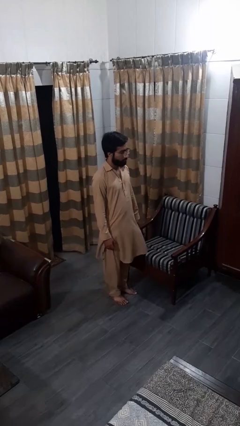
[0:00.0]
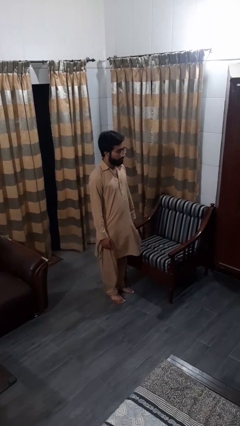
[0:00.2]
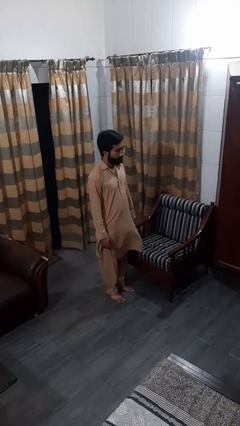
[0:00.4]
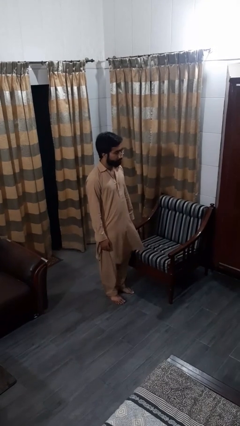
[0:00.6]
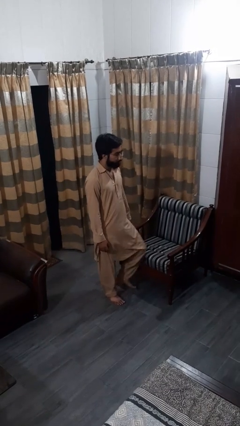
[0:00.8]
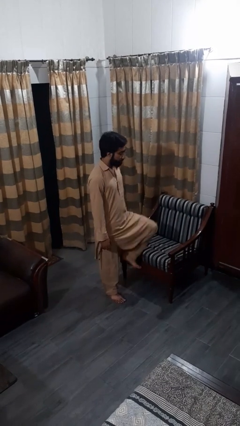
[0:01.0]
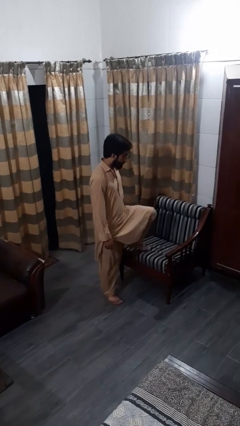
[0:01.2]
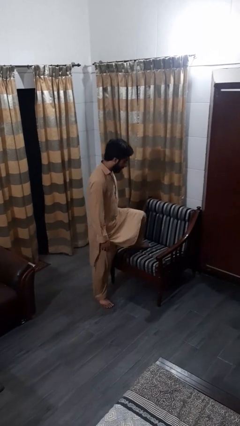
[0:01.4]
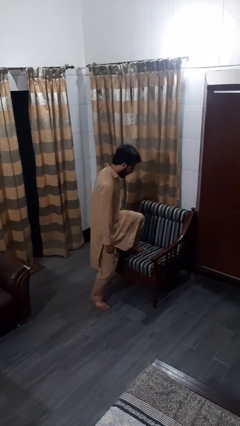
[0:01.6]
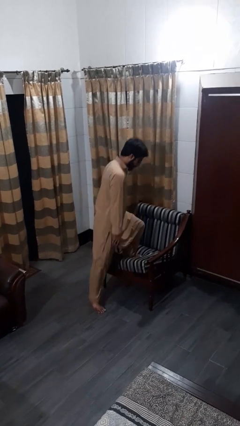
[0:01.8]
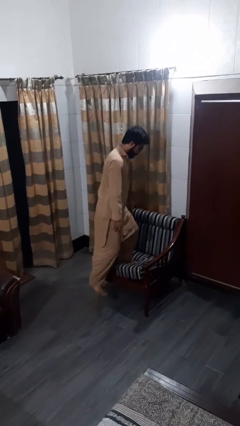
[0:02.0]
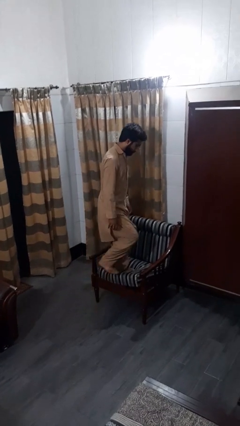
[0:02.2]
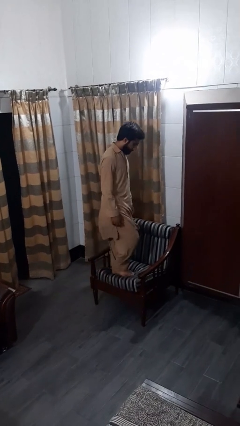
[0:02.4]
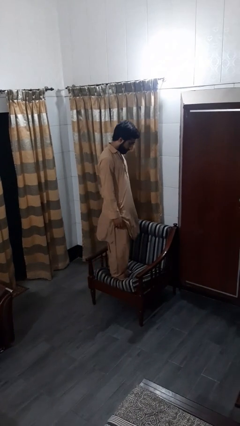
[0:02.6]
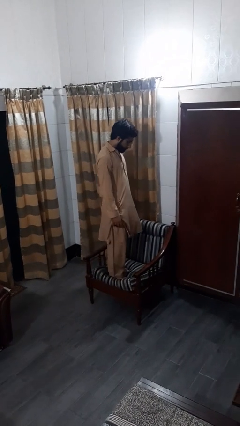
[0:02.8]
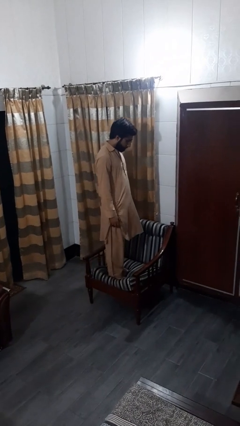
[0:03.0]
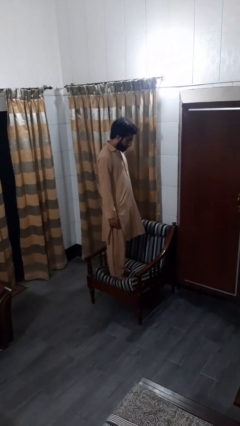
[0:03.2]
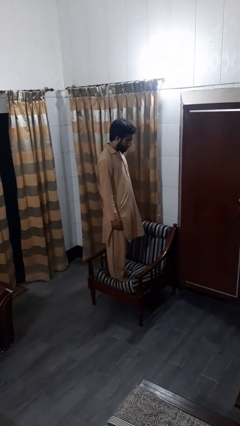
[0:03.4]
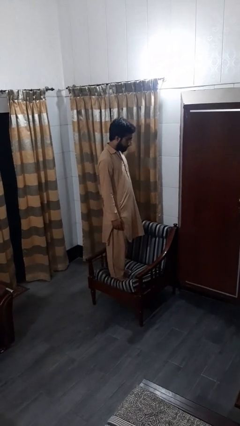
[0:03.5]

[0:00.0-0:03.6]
person climbs on chair

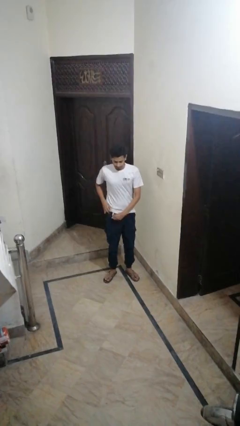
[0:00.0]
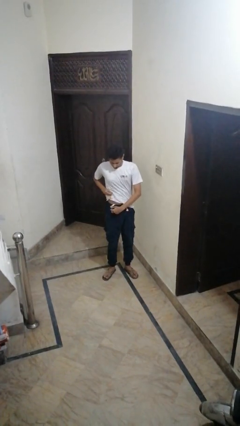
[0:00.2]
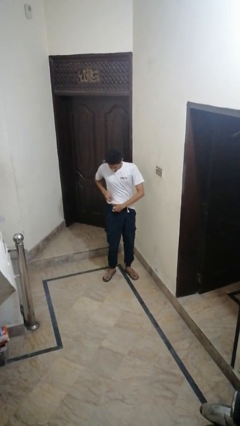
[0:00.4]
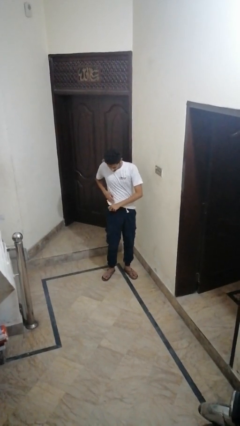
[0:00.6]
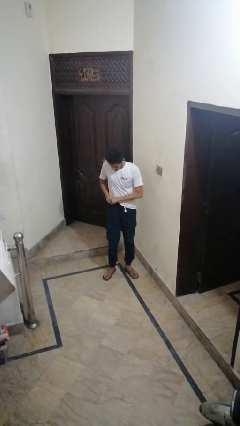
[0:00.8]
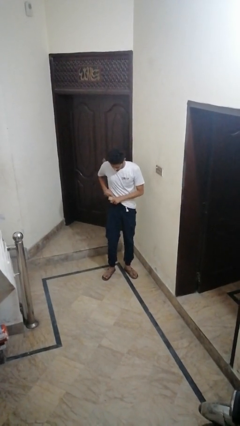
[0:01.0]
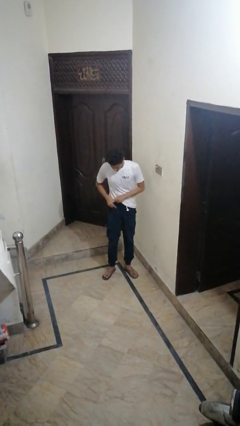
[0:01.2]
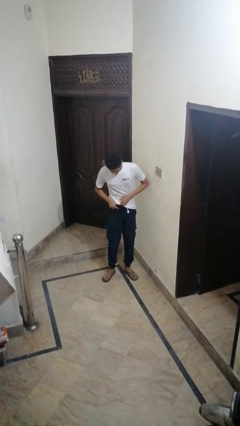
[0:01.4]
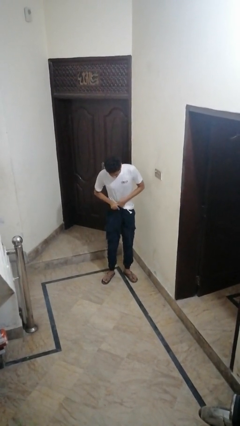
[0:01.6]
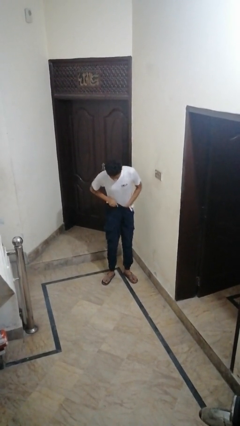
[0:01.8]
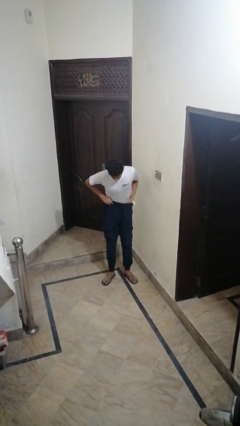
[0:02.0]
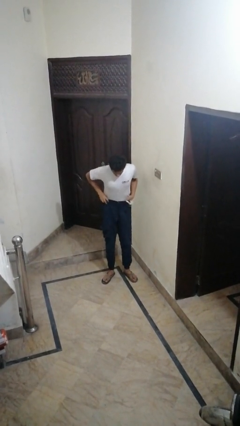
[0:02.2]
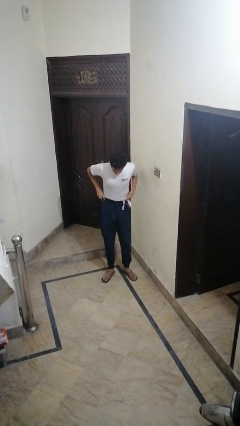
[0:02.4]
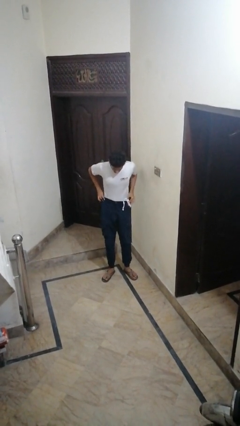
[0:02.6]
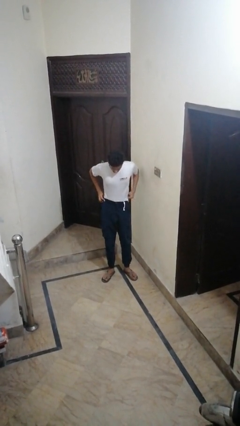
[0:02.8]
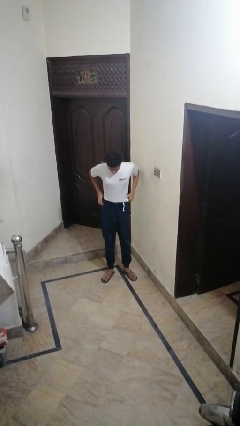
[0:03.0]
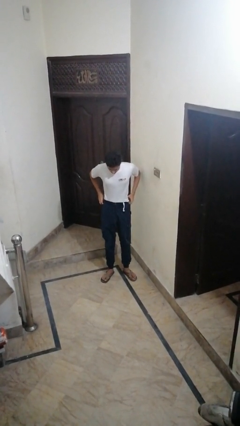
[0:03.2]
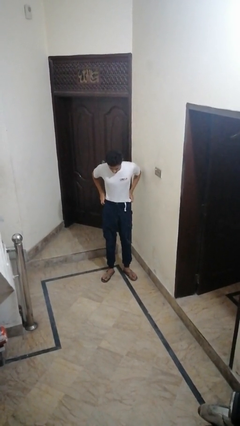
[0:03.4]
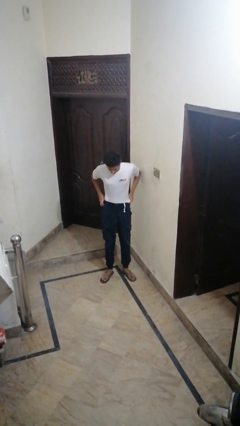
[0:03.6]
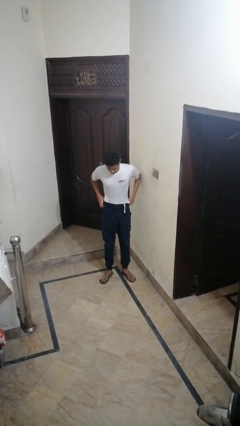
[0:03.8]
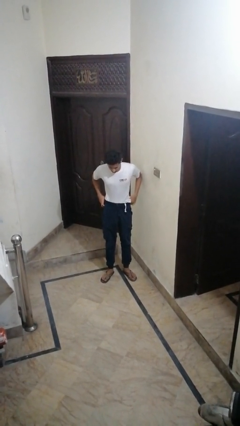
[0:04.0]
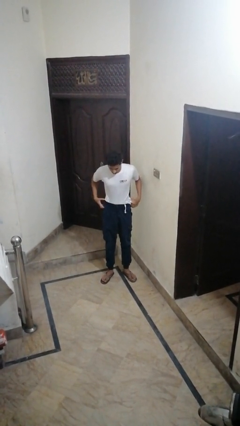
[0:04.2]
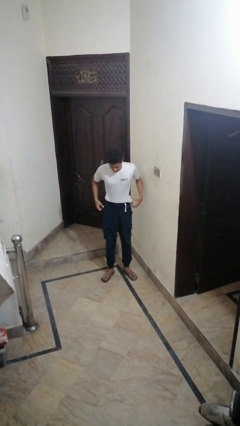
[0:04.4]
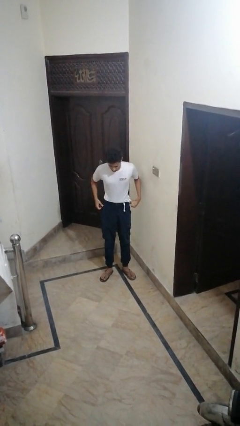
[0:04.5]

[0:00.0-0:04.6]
person tucks in shirt

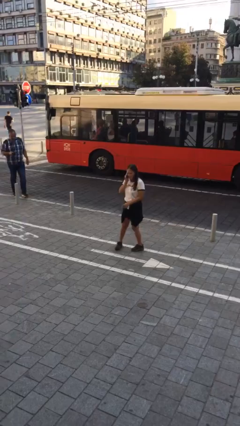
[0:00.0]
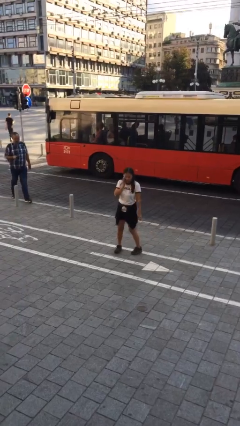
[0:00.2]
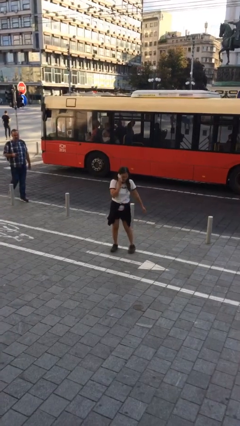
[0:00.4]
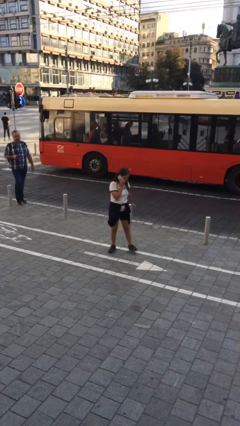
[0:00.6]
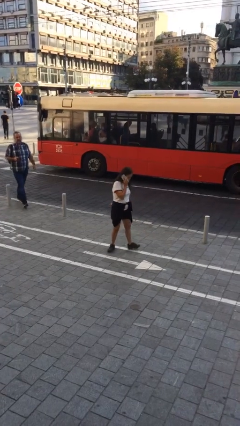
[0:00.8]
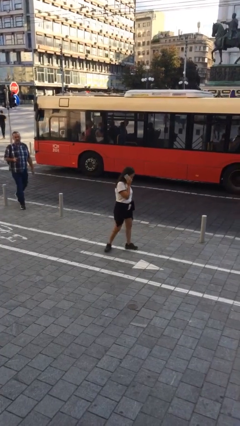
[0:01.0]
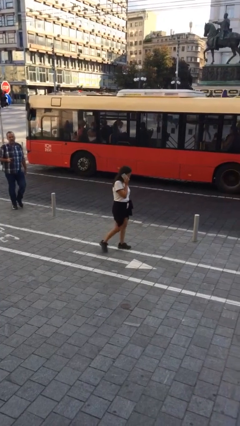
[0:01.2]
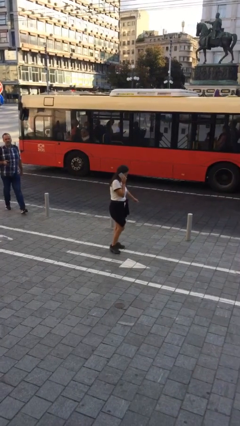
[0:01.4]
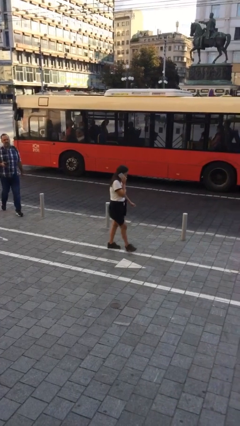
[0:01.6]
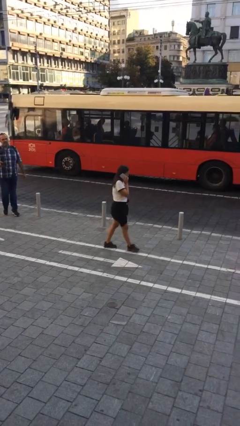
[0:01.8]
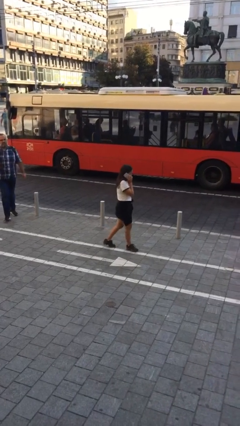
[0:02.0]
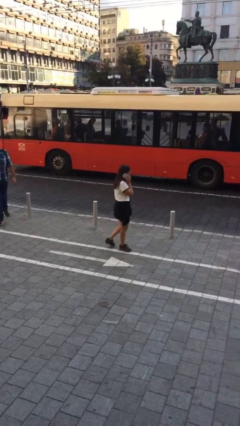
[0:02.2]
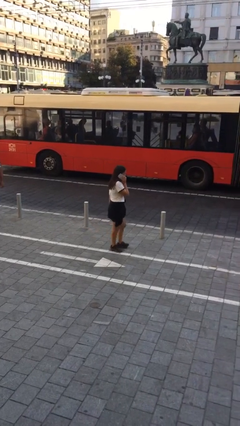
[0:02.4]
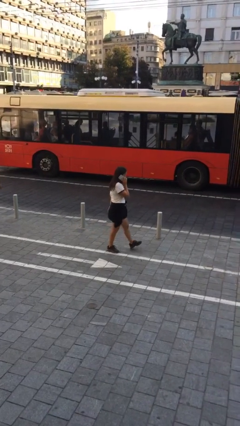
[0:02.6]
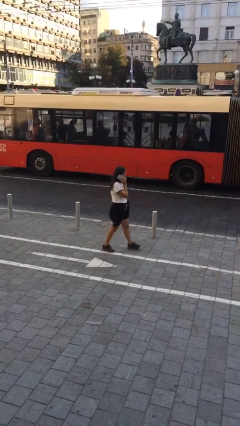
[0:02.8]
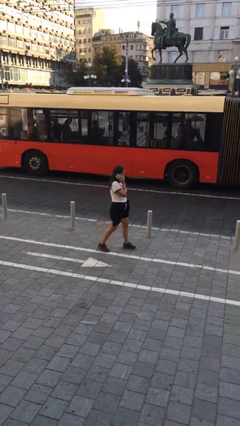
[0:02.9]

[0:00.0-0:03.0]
person talks on phone

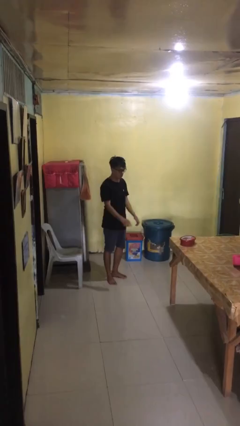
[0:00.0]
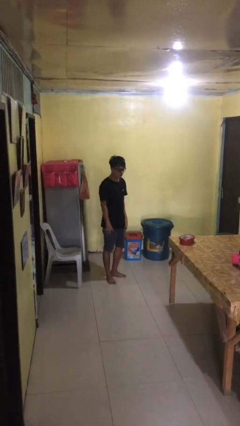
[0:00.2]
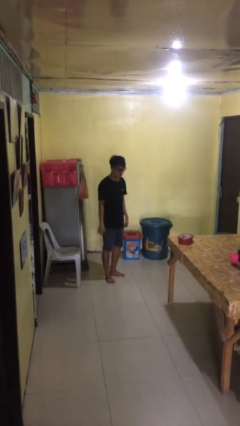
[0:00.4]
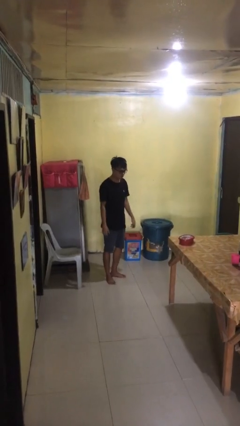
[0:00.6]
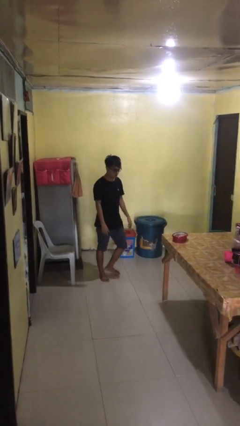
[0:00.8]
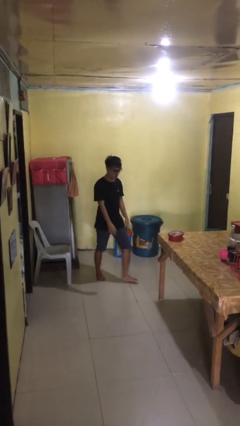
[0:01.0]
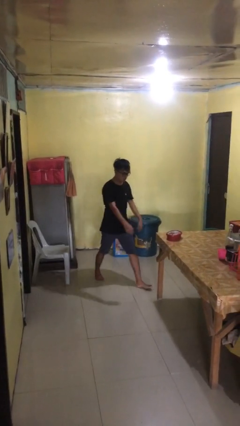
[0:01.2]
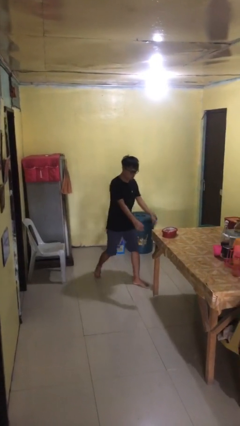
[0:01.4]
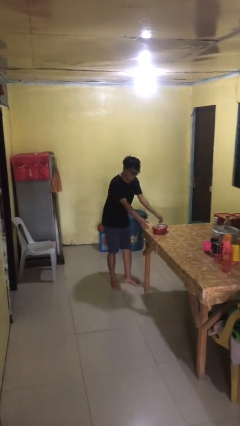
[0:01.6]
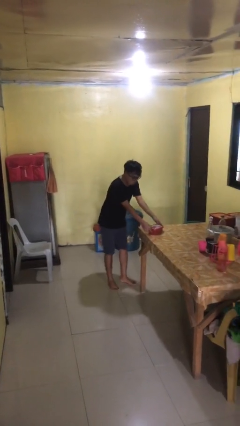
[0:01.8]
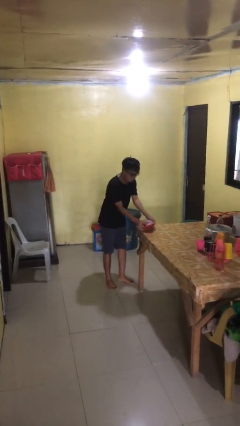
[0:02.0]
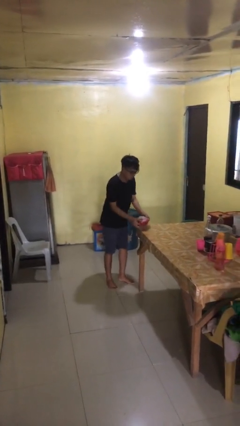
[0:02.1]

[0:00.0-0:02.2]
person picks up object from table

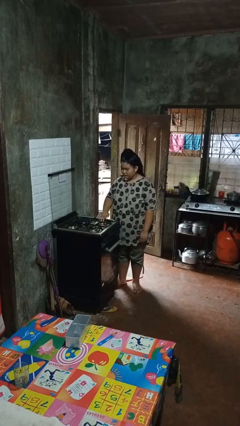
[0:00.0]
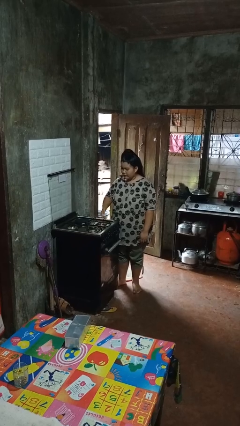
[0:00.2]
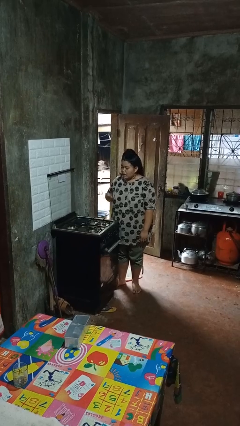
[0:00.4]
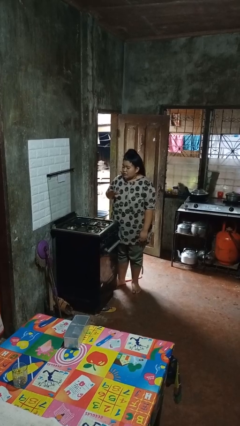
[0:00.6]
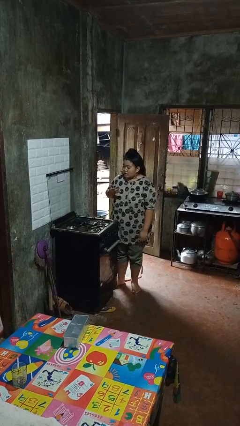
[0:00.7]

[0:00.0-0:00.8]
person burns hand

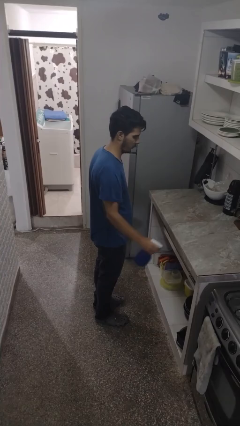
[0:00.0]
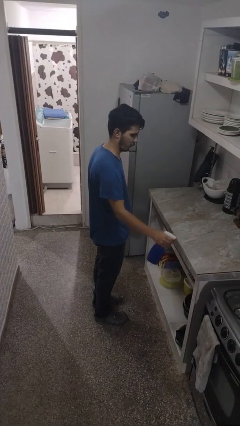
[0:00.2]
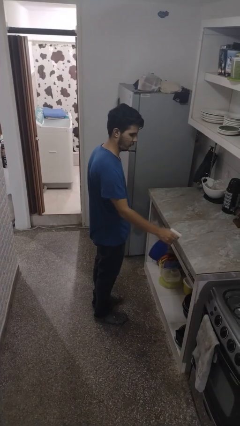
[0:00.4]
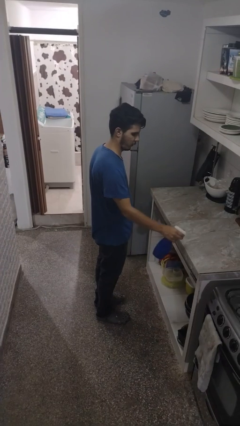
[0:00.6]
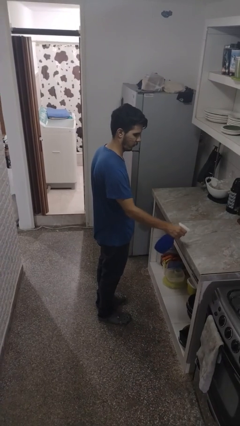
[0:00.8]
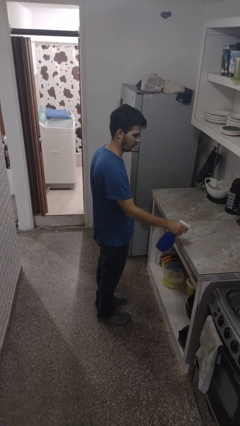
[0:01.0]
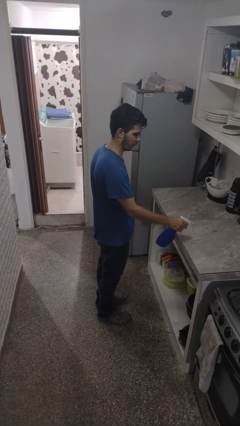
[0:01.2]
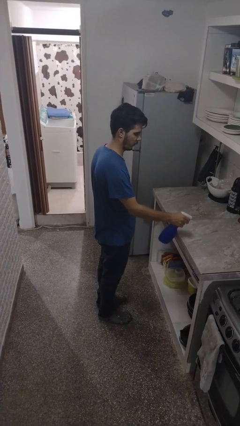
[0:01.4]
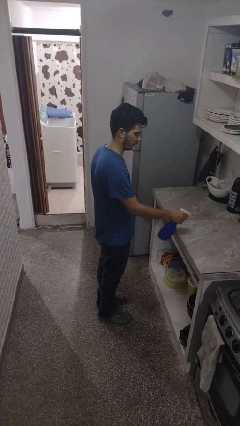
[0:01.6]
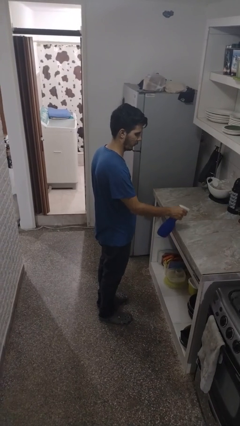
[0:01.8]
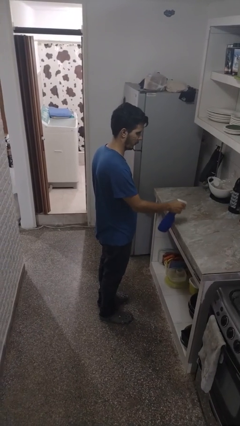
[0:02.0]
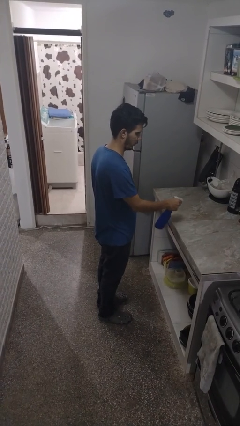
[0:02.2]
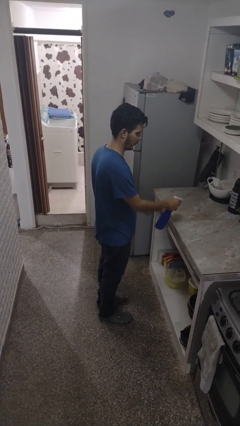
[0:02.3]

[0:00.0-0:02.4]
person sprays from bottle

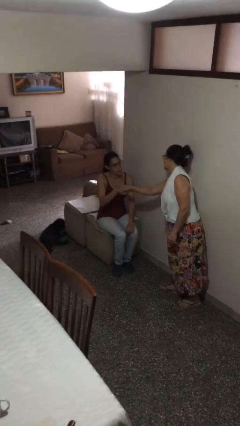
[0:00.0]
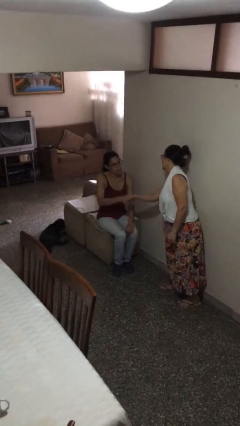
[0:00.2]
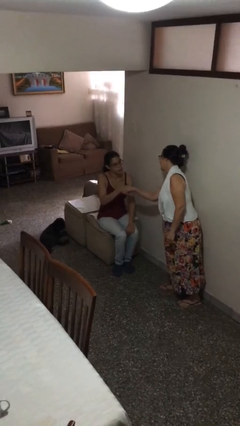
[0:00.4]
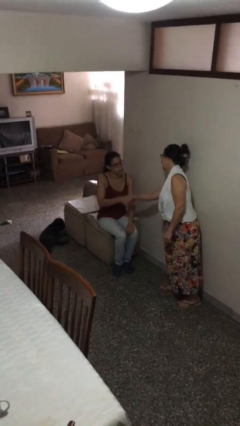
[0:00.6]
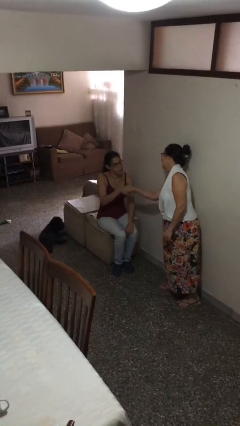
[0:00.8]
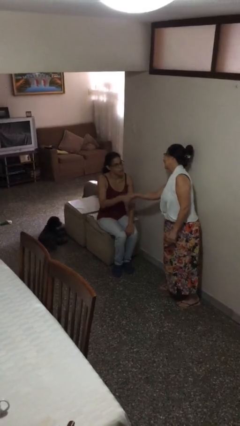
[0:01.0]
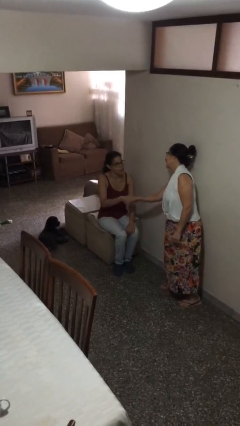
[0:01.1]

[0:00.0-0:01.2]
person shakes hand
